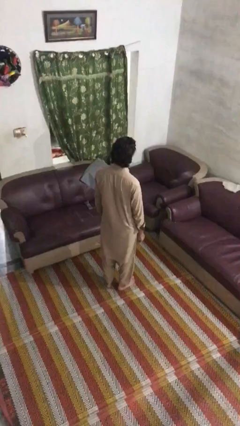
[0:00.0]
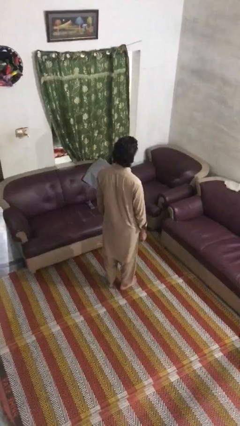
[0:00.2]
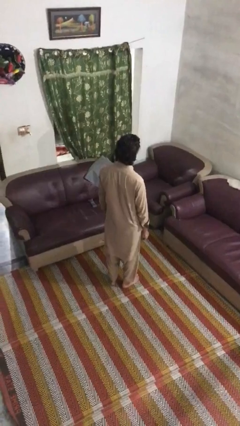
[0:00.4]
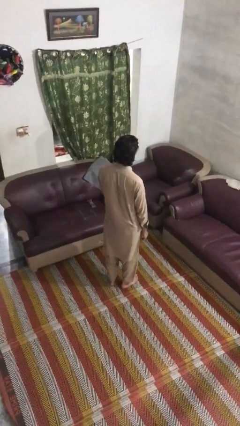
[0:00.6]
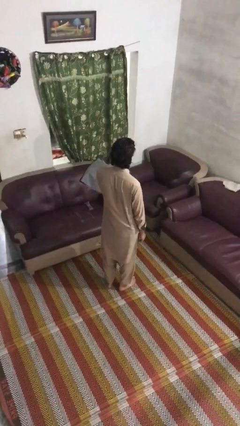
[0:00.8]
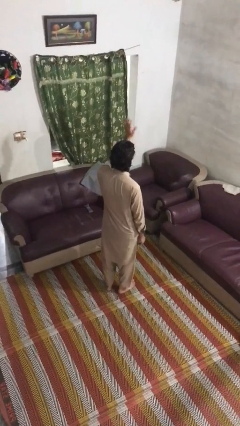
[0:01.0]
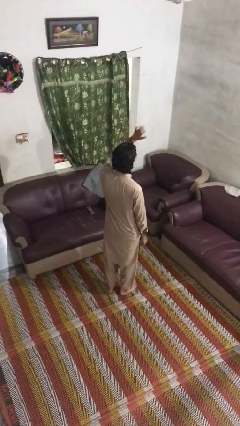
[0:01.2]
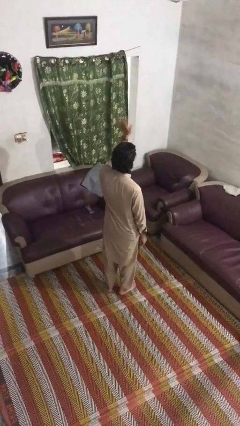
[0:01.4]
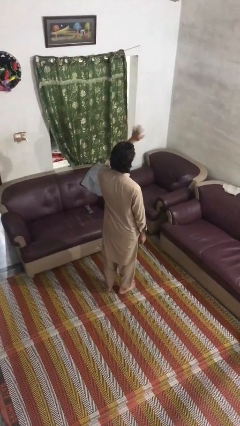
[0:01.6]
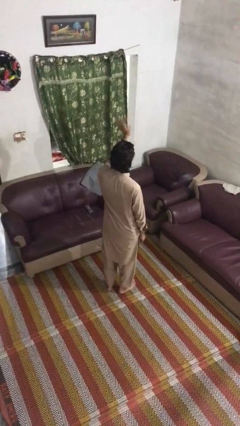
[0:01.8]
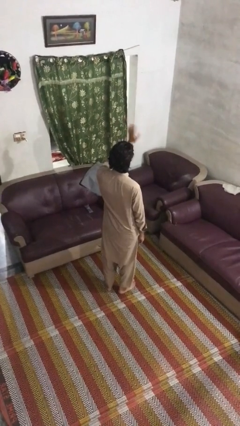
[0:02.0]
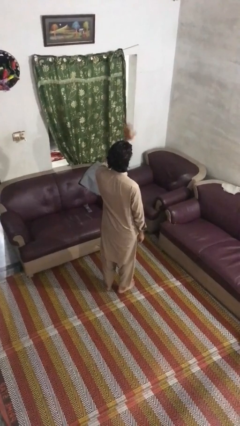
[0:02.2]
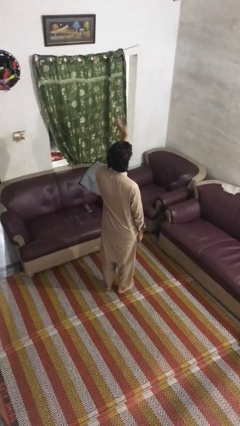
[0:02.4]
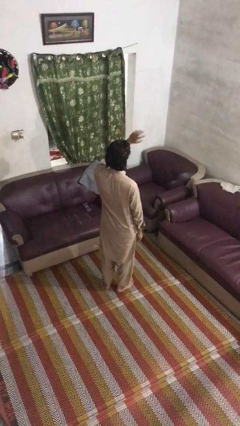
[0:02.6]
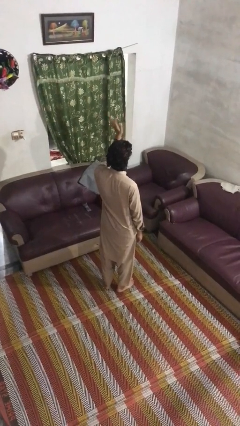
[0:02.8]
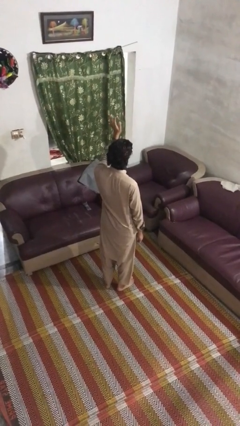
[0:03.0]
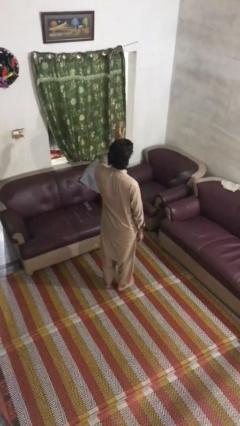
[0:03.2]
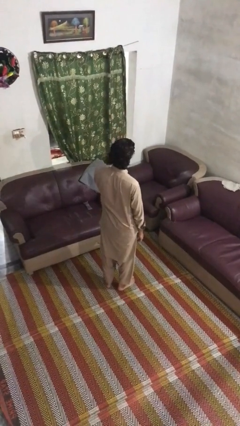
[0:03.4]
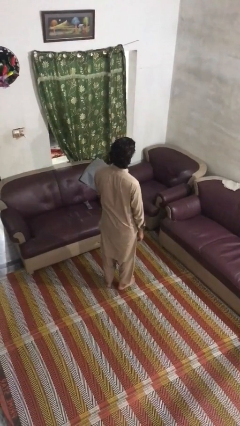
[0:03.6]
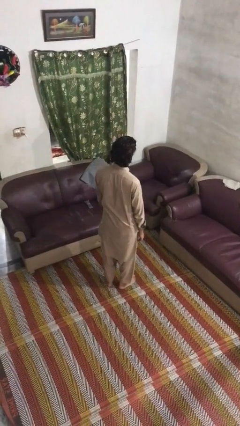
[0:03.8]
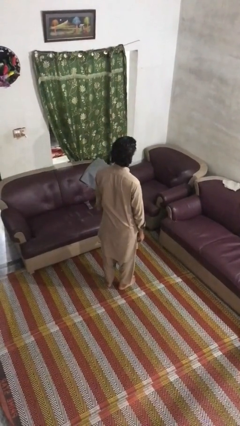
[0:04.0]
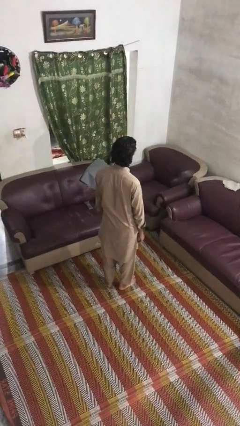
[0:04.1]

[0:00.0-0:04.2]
person waves at person

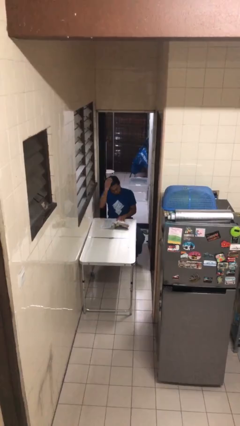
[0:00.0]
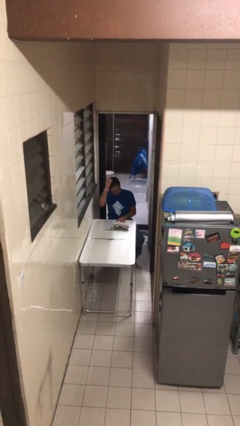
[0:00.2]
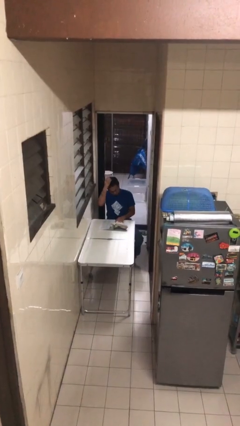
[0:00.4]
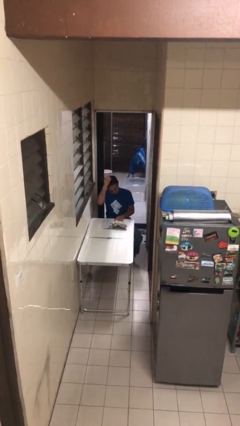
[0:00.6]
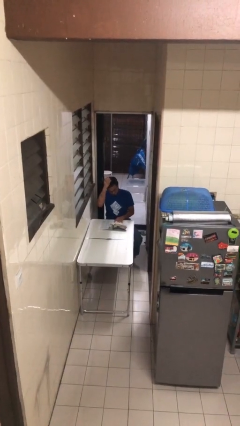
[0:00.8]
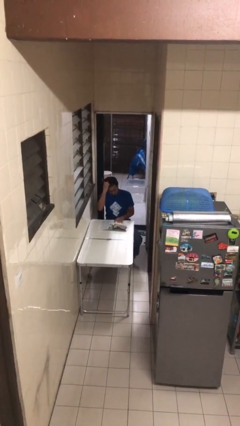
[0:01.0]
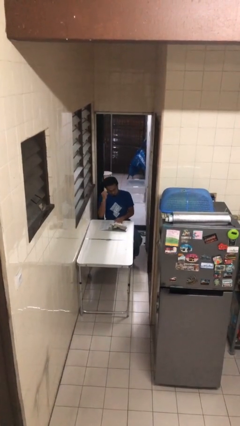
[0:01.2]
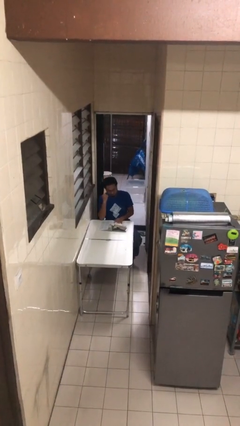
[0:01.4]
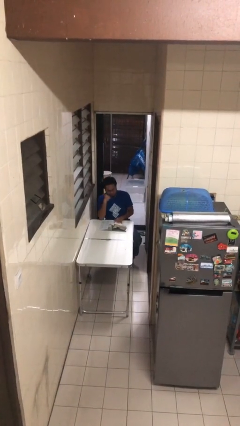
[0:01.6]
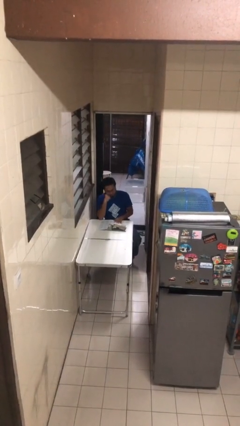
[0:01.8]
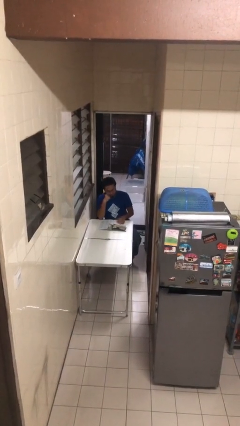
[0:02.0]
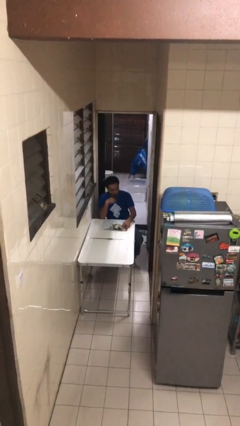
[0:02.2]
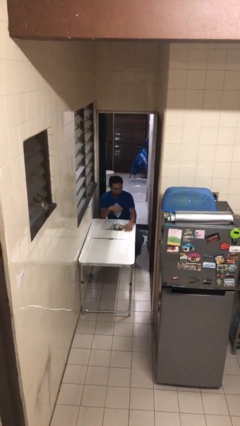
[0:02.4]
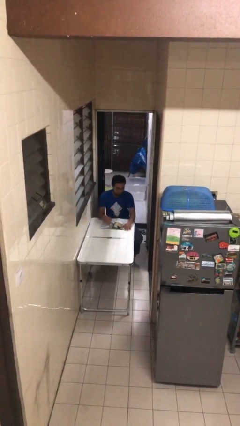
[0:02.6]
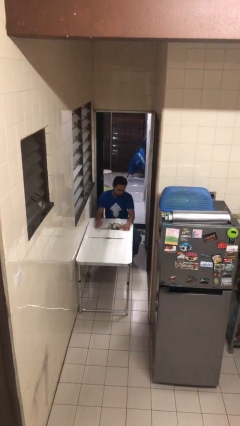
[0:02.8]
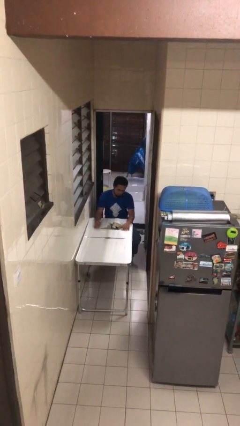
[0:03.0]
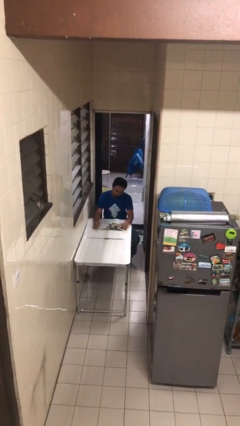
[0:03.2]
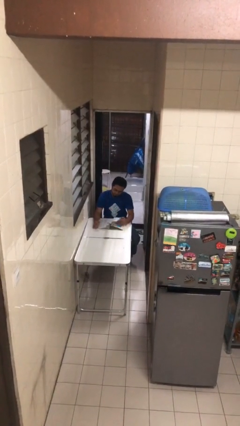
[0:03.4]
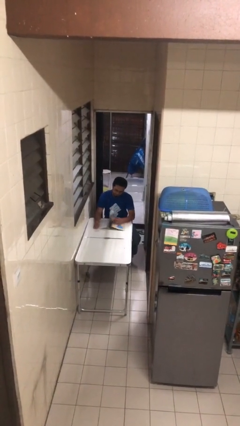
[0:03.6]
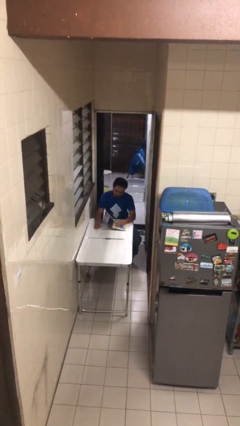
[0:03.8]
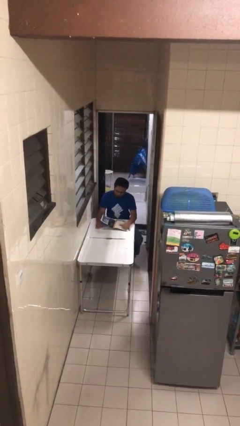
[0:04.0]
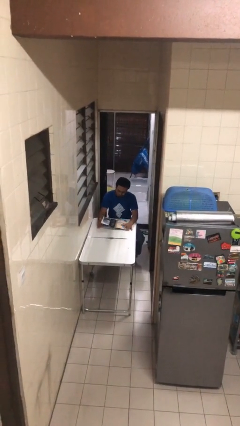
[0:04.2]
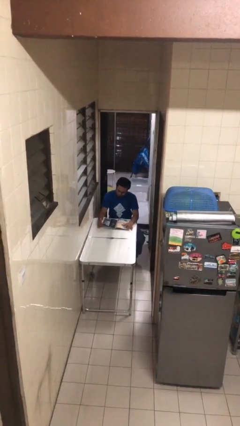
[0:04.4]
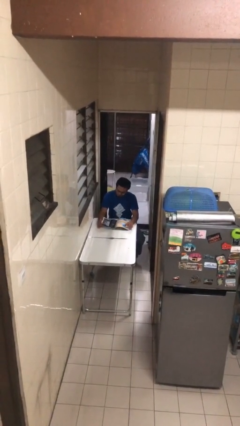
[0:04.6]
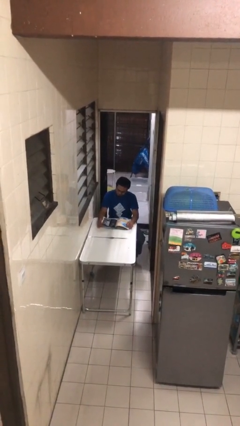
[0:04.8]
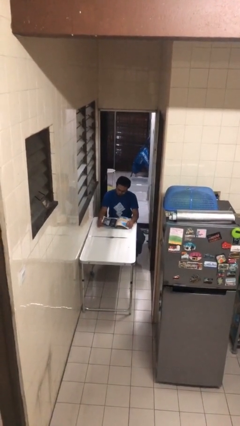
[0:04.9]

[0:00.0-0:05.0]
person reads document

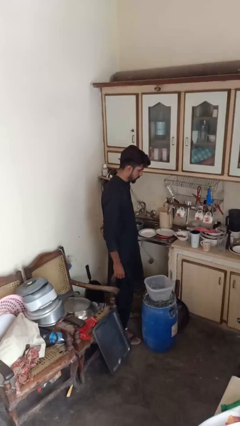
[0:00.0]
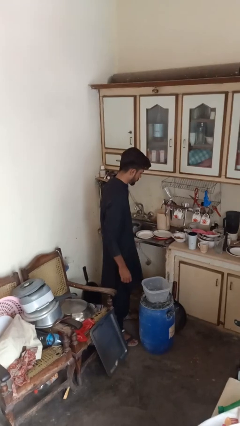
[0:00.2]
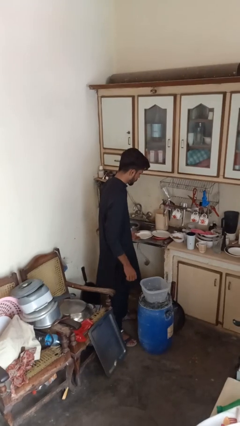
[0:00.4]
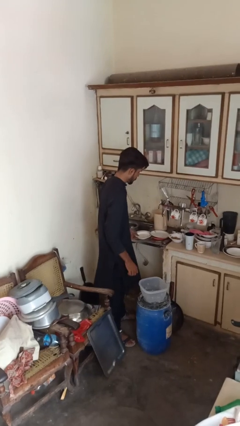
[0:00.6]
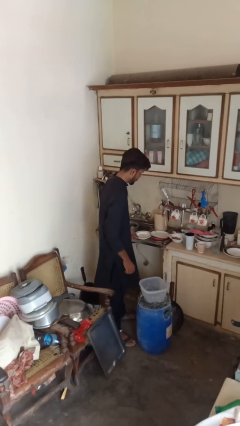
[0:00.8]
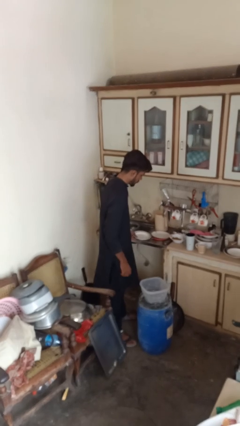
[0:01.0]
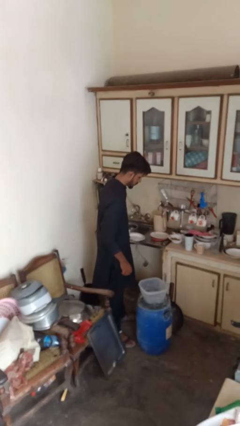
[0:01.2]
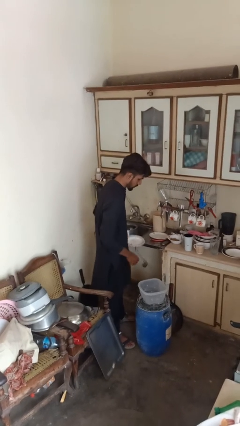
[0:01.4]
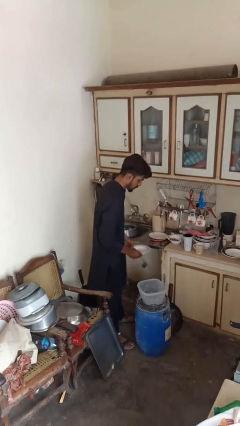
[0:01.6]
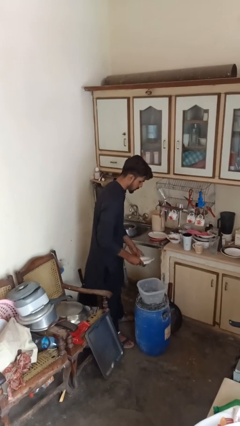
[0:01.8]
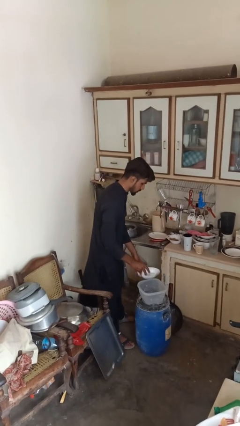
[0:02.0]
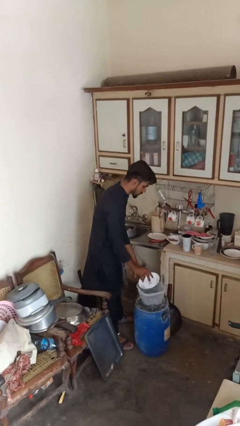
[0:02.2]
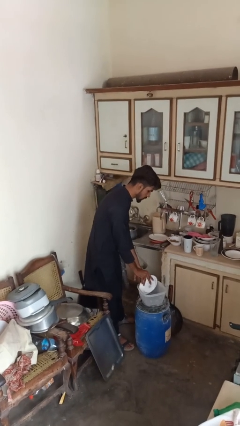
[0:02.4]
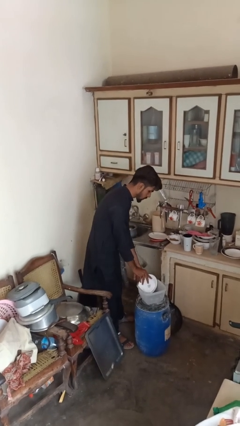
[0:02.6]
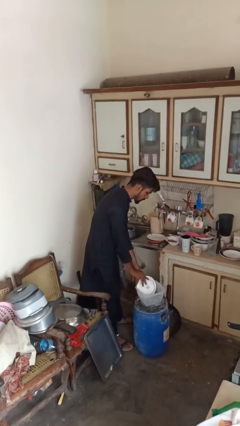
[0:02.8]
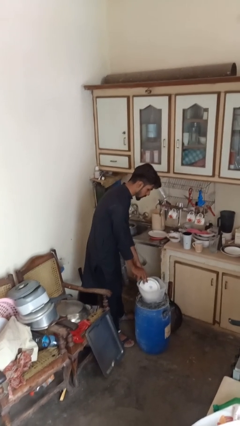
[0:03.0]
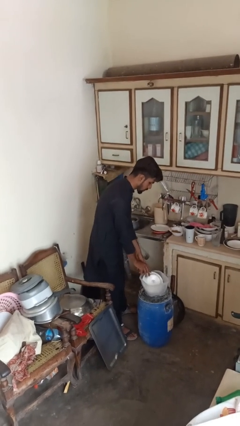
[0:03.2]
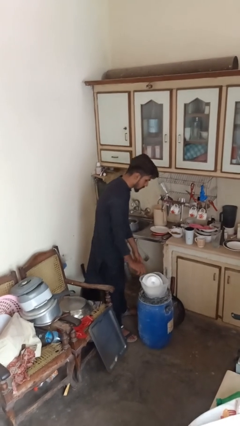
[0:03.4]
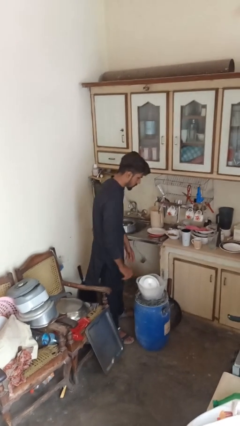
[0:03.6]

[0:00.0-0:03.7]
person loads dishwasher

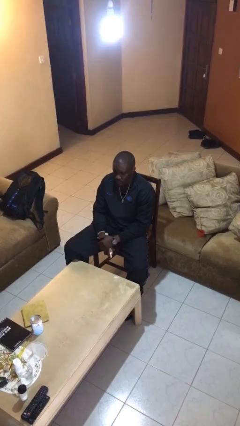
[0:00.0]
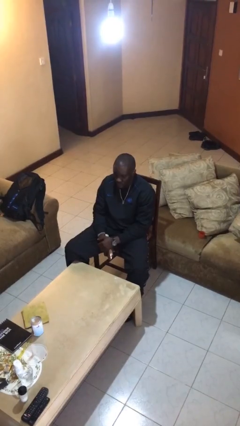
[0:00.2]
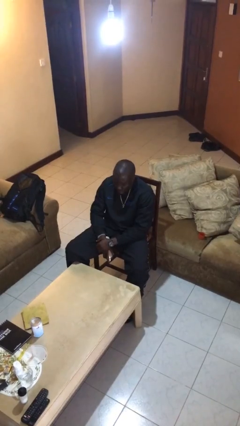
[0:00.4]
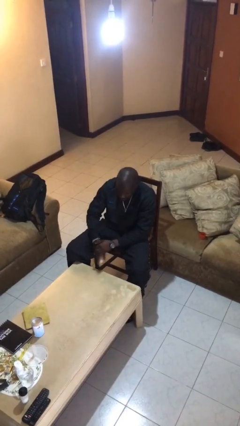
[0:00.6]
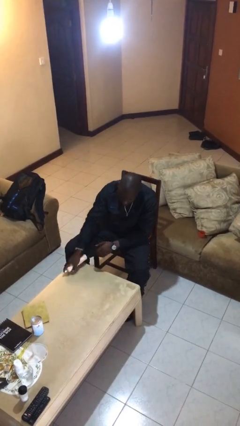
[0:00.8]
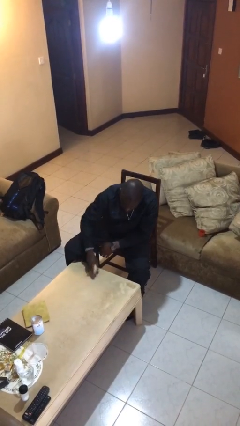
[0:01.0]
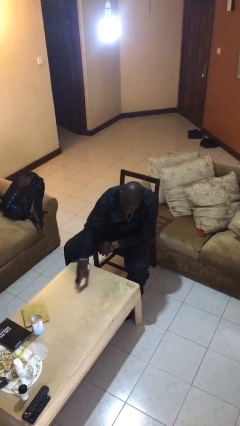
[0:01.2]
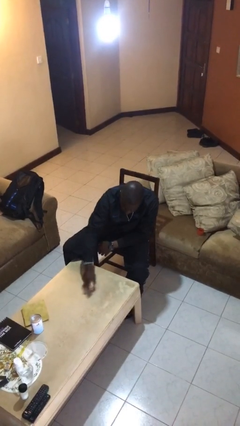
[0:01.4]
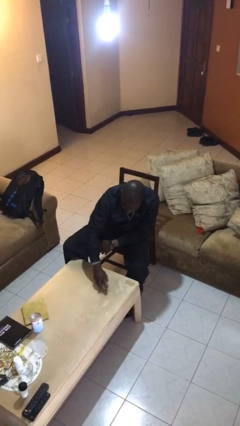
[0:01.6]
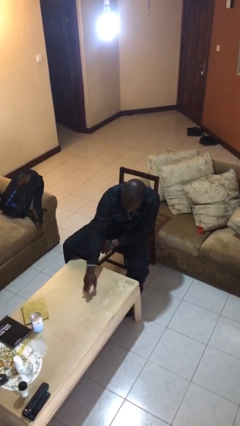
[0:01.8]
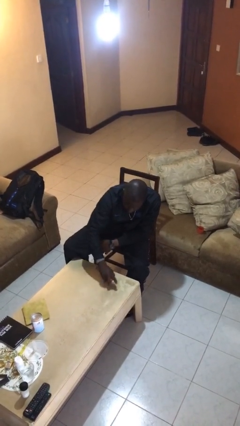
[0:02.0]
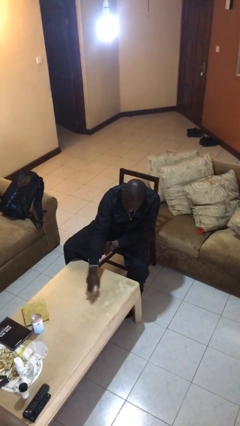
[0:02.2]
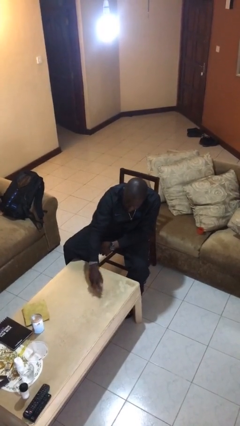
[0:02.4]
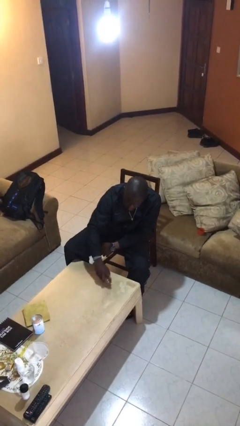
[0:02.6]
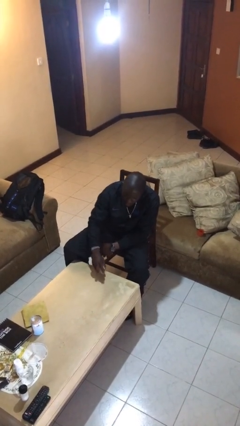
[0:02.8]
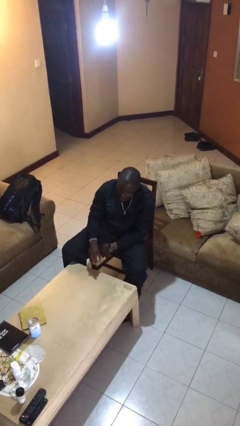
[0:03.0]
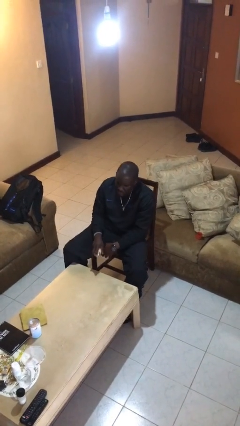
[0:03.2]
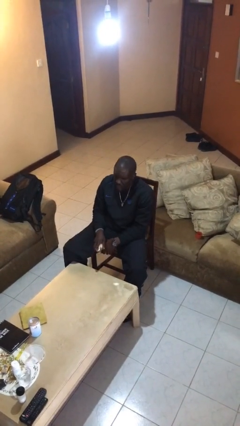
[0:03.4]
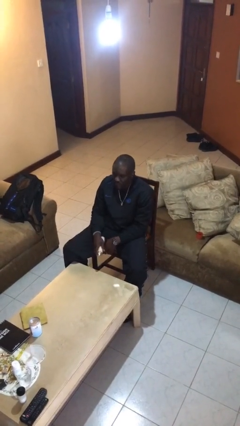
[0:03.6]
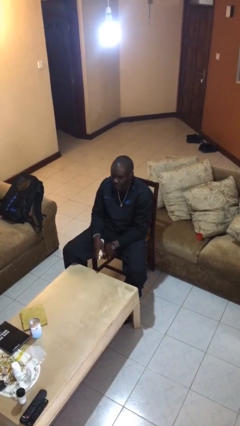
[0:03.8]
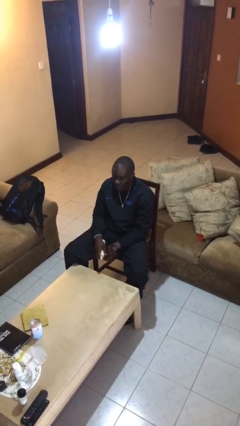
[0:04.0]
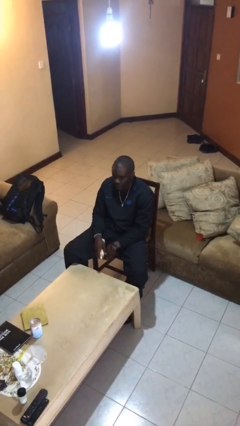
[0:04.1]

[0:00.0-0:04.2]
person sprays from bottle

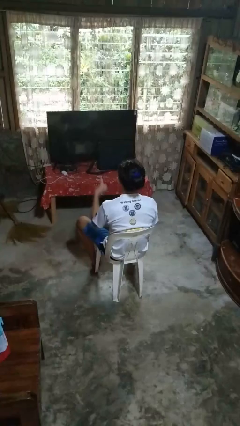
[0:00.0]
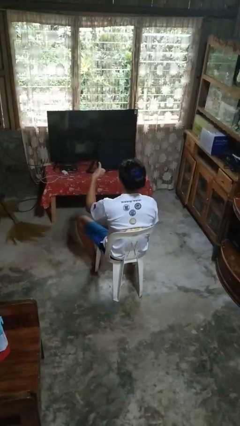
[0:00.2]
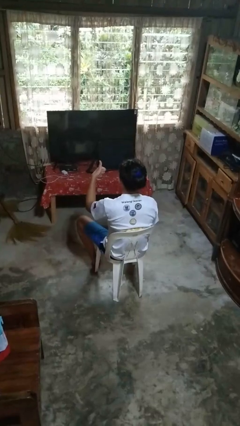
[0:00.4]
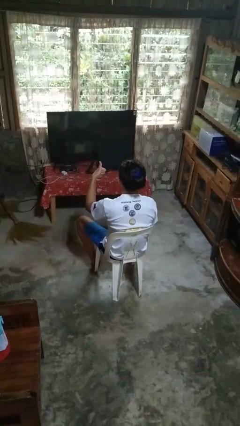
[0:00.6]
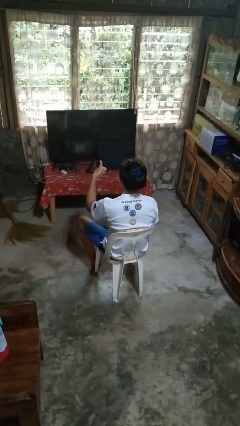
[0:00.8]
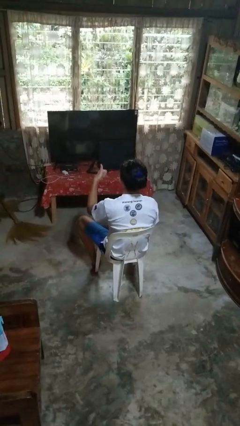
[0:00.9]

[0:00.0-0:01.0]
person gestures thumbs up
